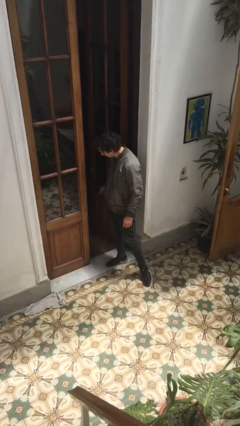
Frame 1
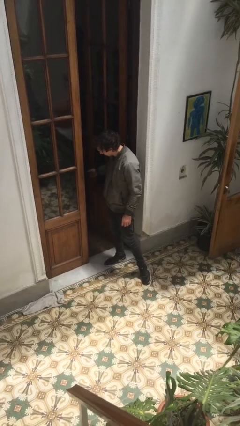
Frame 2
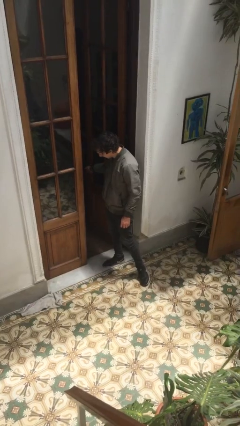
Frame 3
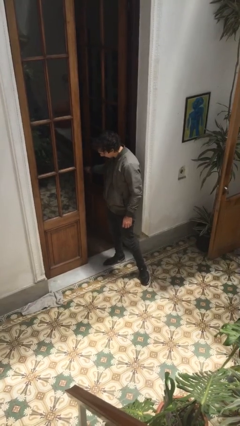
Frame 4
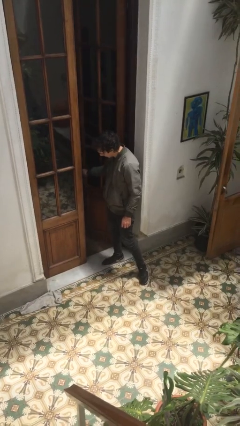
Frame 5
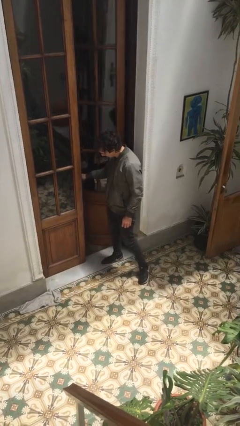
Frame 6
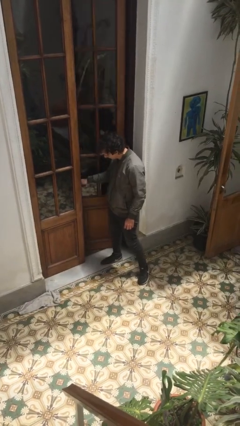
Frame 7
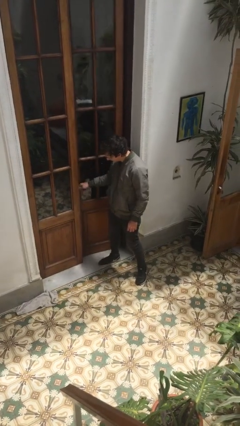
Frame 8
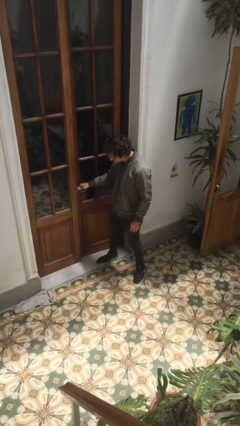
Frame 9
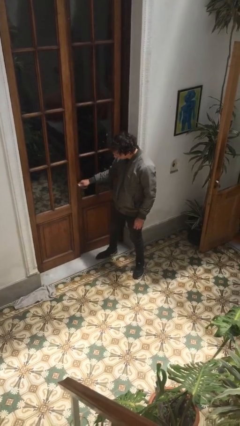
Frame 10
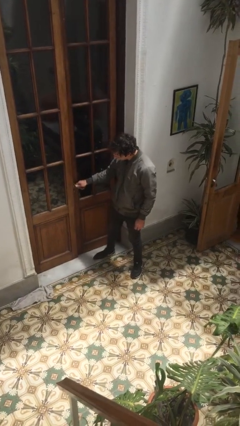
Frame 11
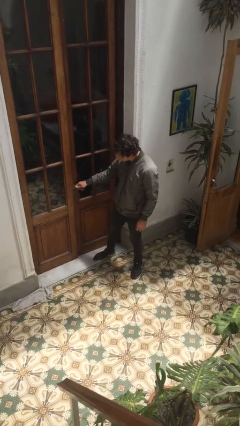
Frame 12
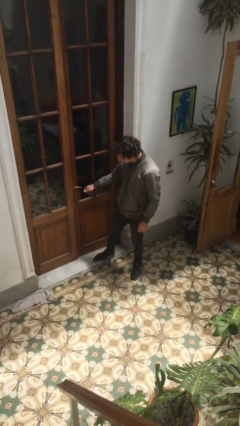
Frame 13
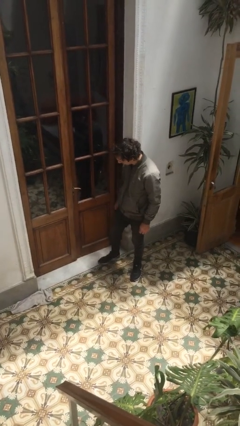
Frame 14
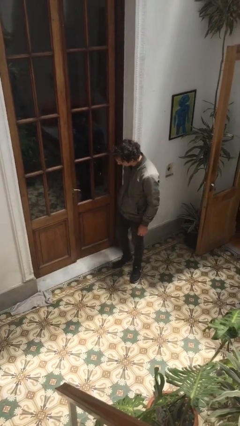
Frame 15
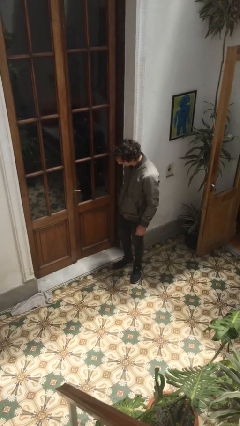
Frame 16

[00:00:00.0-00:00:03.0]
person closes facility door

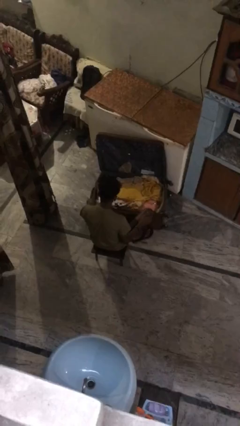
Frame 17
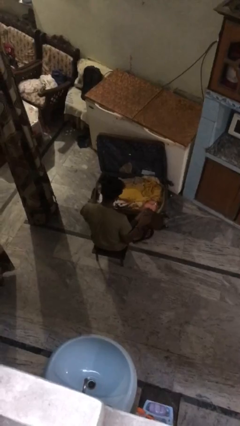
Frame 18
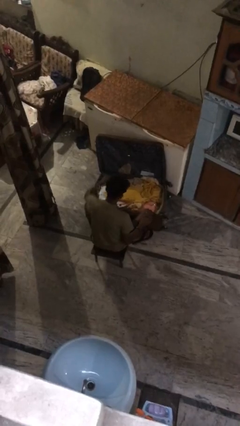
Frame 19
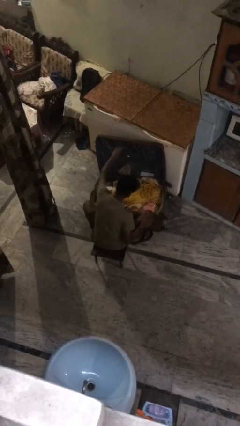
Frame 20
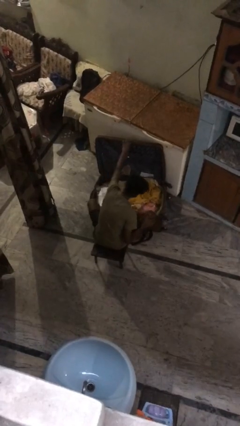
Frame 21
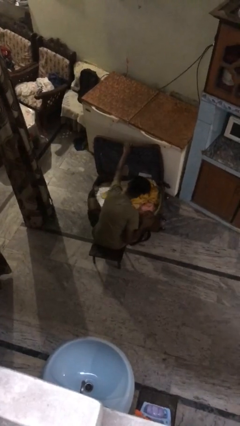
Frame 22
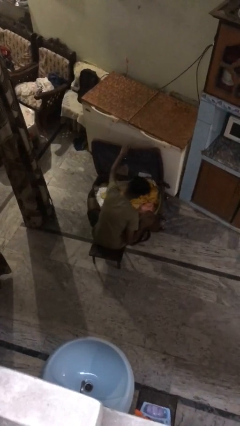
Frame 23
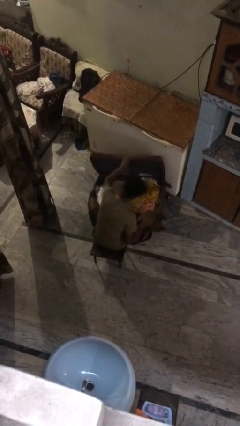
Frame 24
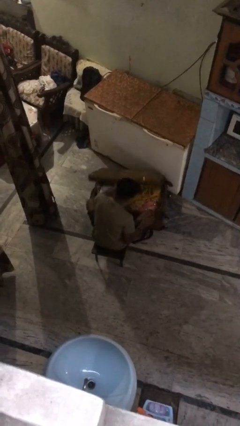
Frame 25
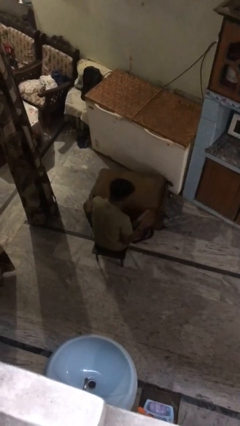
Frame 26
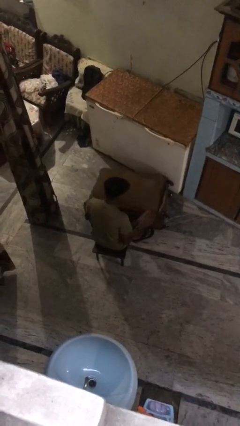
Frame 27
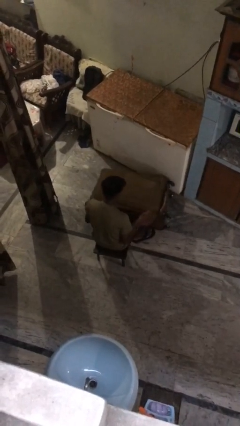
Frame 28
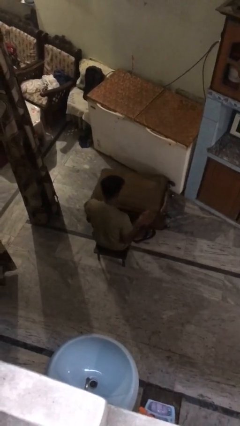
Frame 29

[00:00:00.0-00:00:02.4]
person closes suitcase

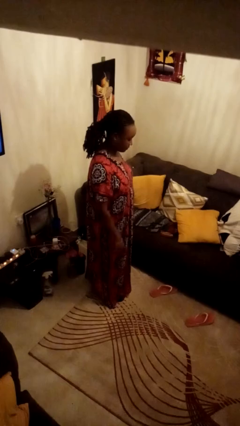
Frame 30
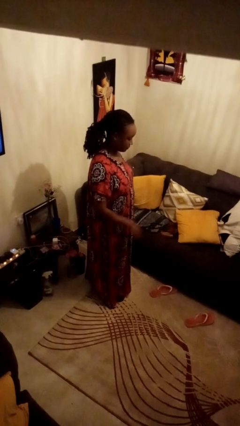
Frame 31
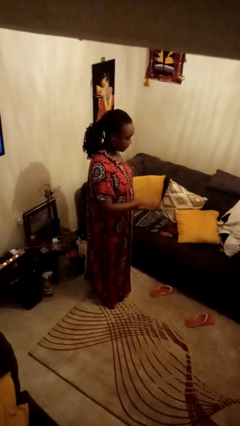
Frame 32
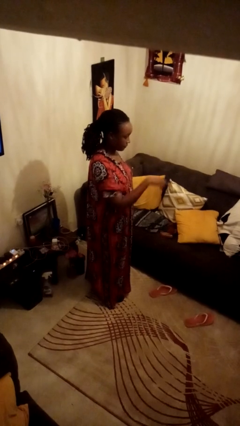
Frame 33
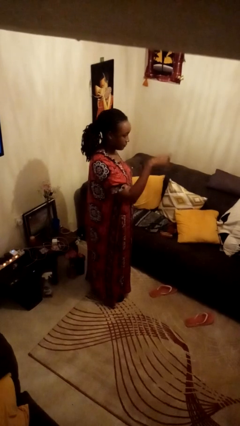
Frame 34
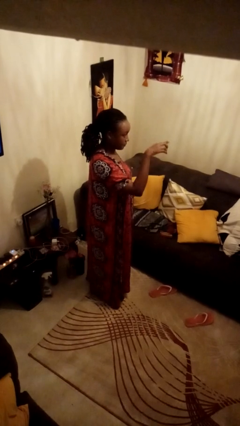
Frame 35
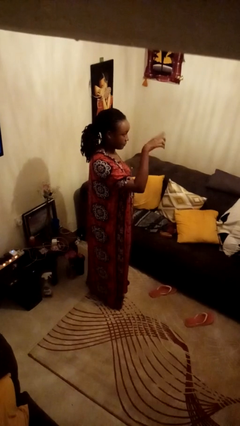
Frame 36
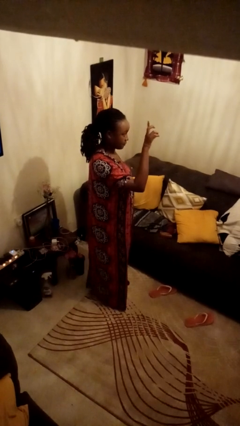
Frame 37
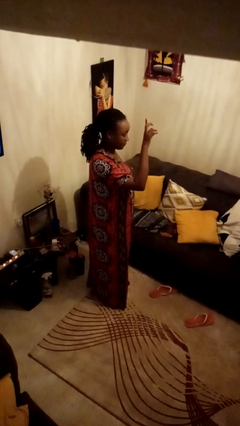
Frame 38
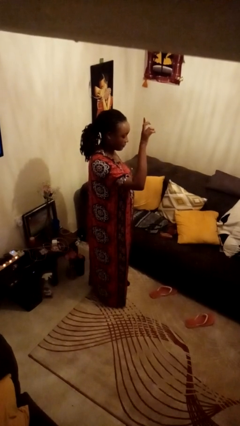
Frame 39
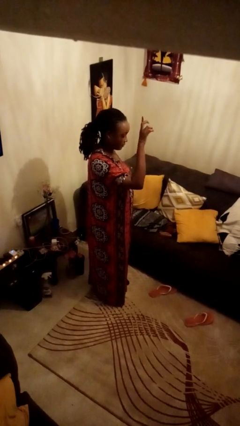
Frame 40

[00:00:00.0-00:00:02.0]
person gestures swipe up

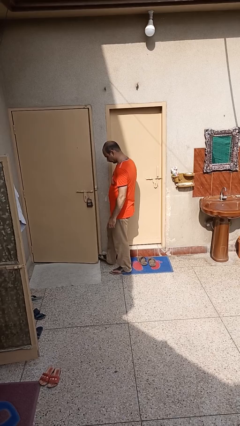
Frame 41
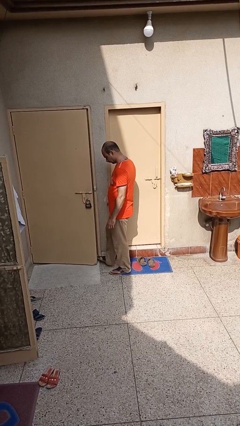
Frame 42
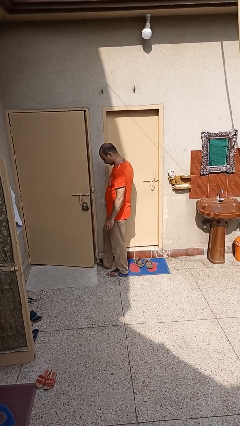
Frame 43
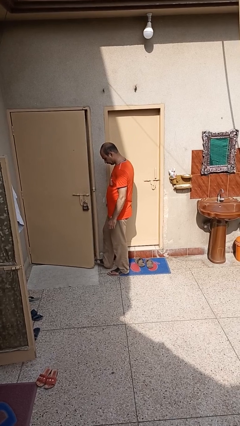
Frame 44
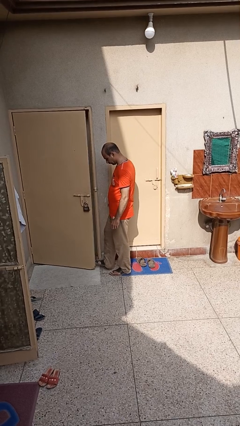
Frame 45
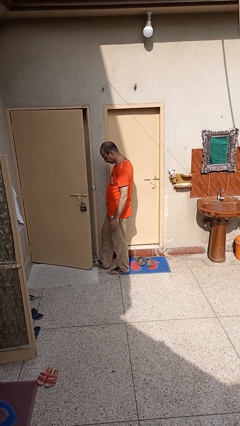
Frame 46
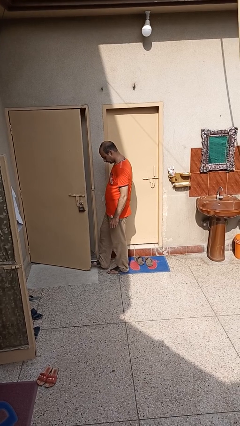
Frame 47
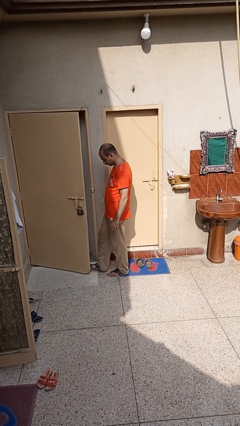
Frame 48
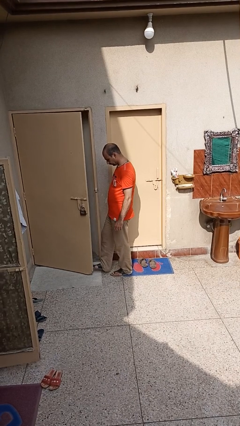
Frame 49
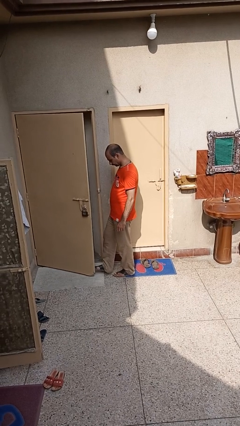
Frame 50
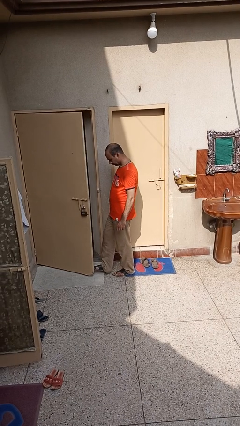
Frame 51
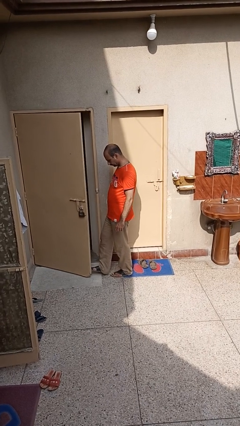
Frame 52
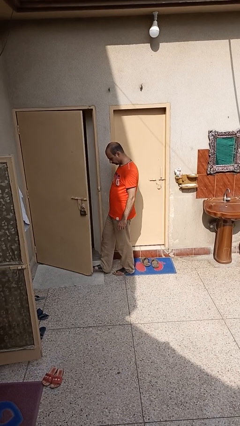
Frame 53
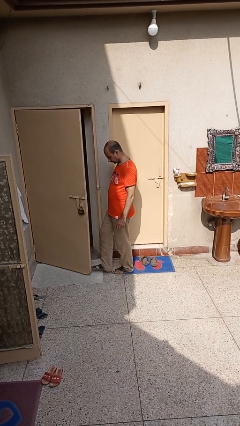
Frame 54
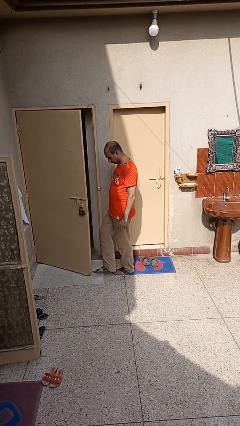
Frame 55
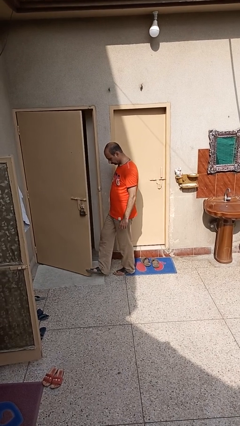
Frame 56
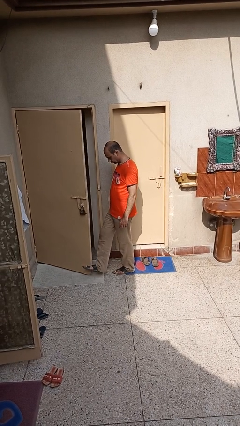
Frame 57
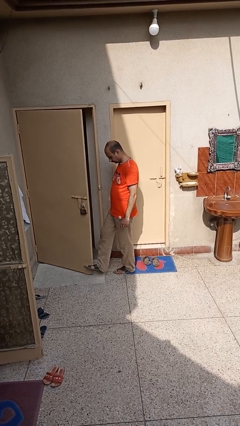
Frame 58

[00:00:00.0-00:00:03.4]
person opens facility door

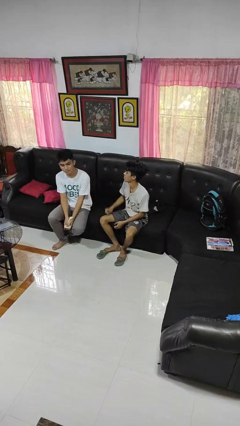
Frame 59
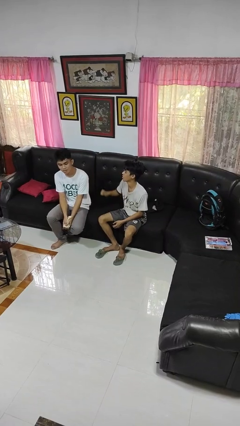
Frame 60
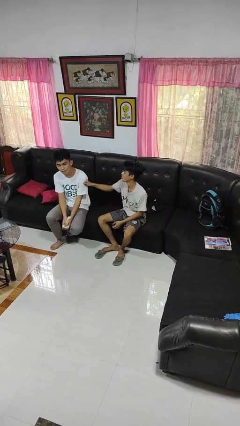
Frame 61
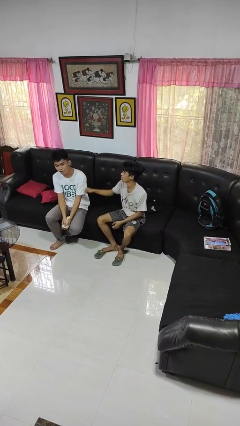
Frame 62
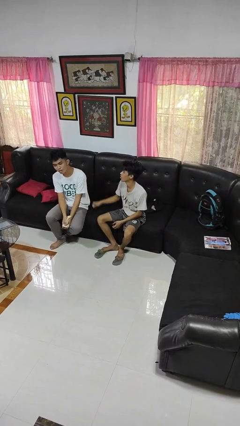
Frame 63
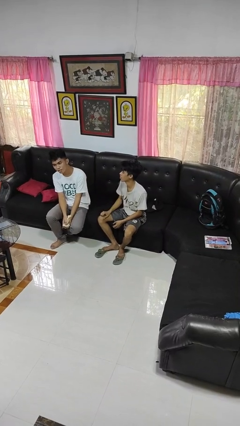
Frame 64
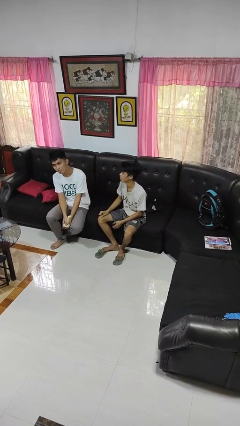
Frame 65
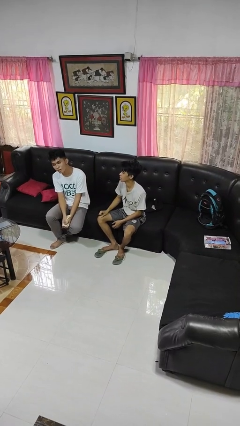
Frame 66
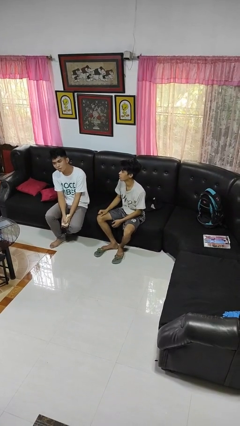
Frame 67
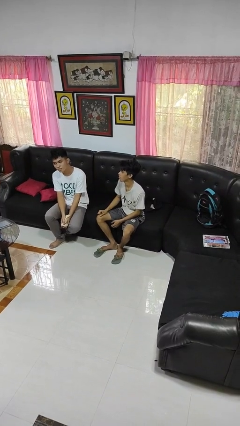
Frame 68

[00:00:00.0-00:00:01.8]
person pounds shoulders of person

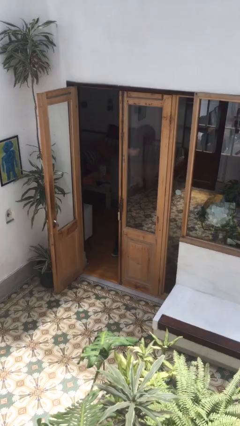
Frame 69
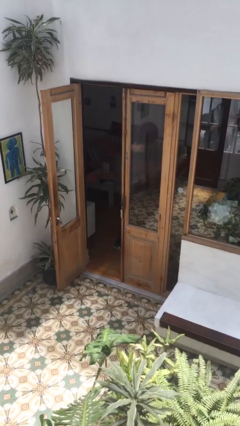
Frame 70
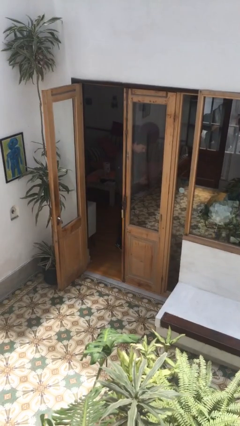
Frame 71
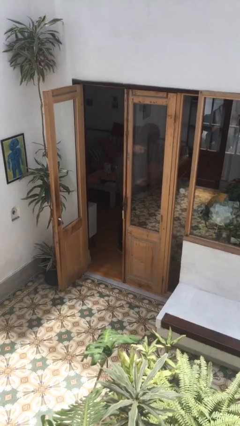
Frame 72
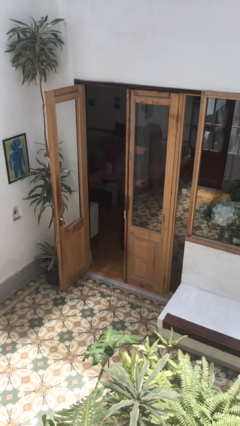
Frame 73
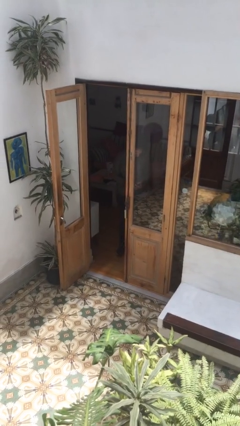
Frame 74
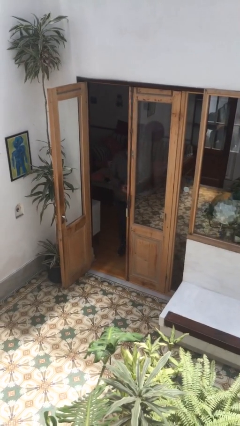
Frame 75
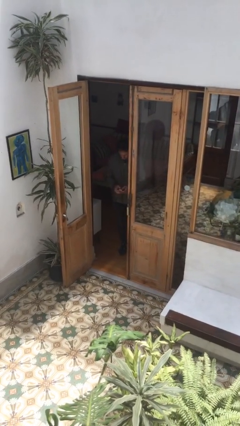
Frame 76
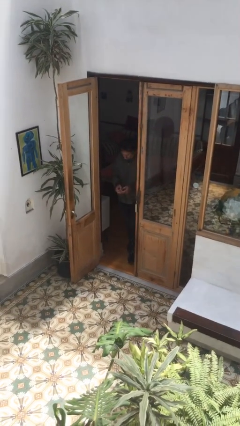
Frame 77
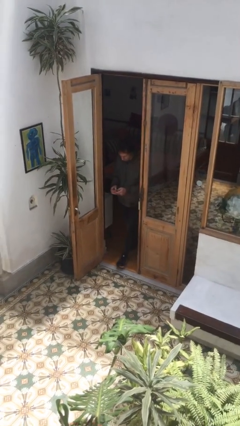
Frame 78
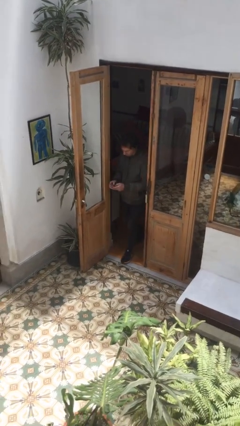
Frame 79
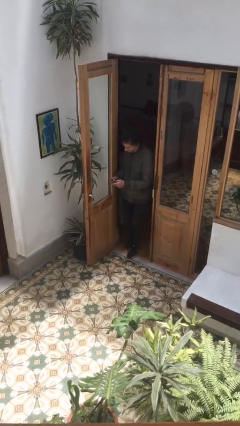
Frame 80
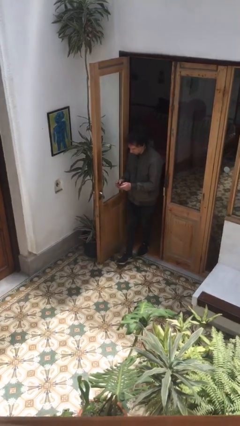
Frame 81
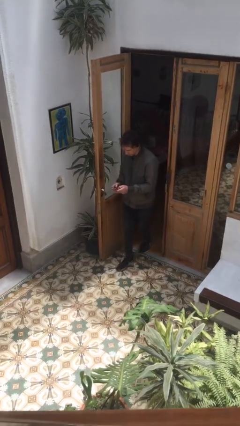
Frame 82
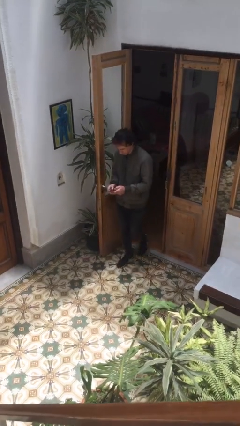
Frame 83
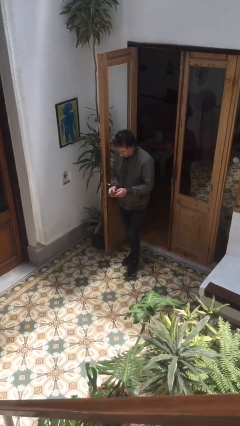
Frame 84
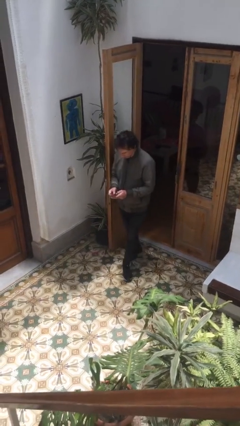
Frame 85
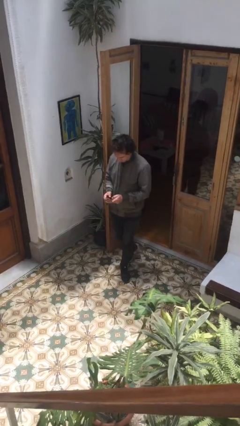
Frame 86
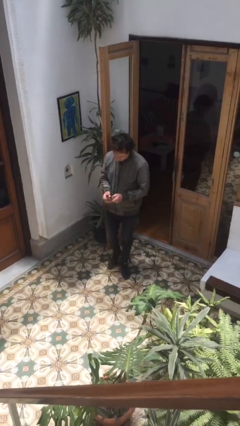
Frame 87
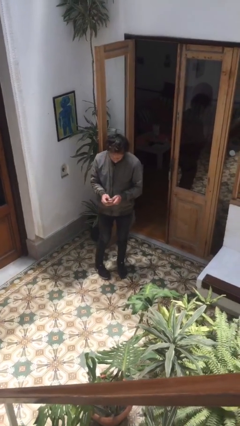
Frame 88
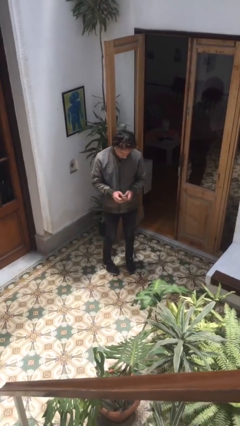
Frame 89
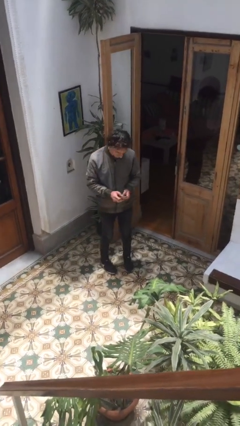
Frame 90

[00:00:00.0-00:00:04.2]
person enters scene through structure

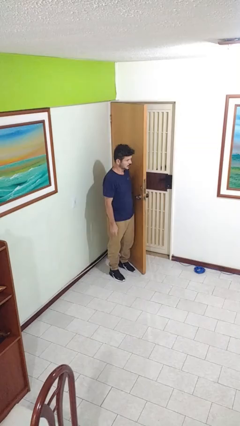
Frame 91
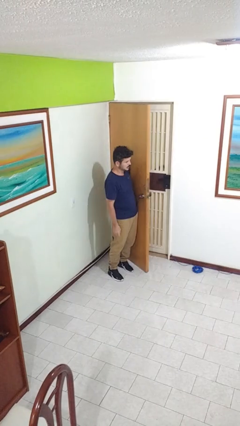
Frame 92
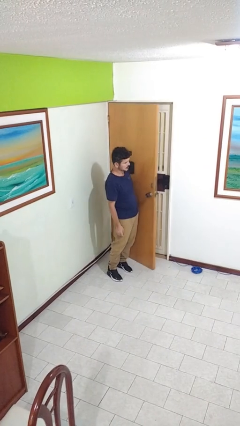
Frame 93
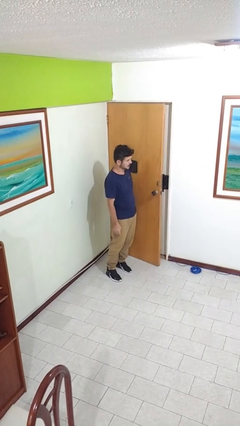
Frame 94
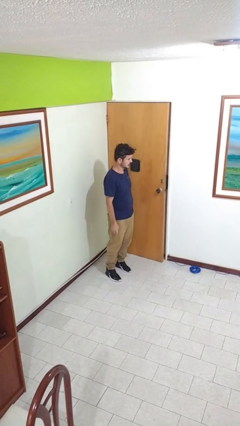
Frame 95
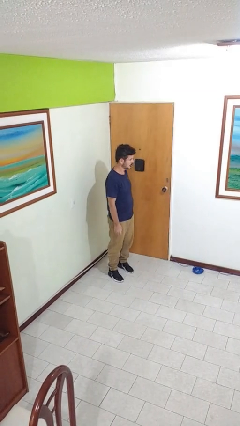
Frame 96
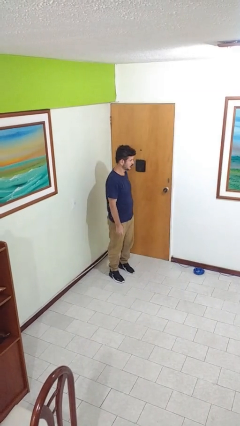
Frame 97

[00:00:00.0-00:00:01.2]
person closes door with hip
